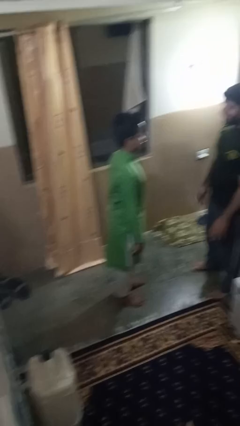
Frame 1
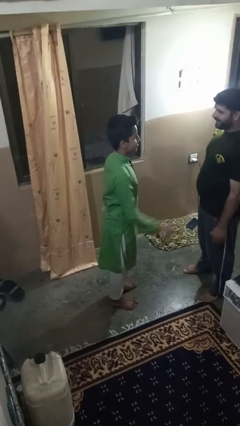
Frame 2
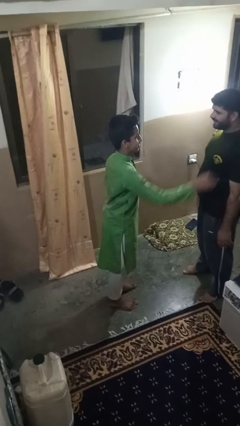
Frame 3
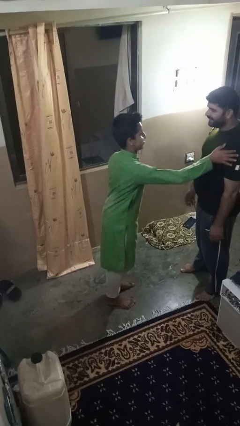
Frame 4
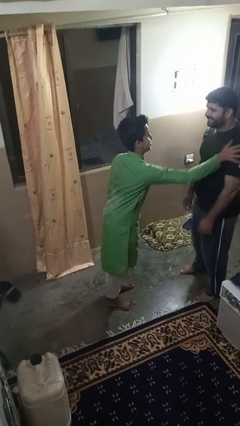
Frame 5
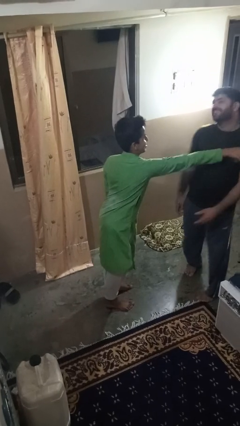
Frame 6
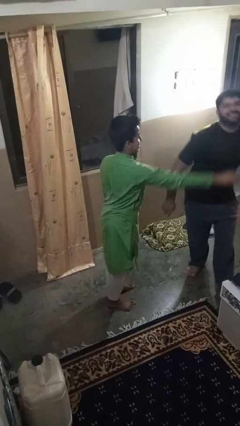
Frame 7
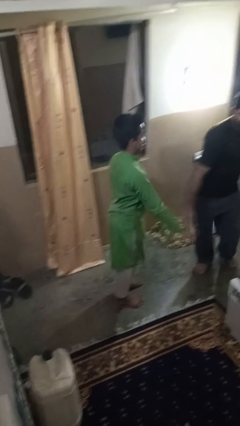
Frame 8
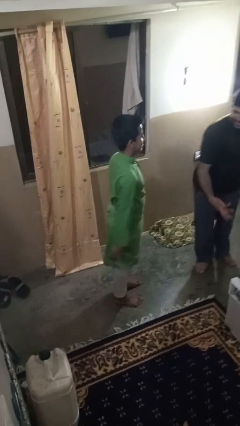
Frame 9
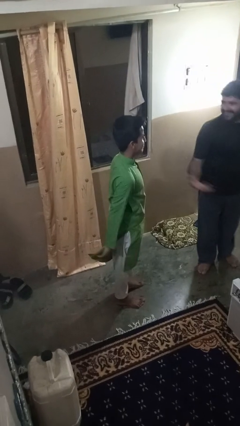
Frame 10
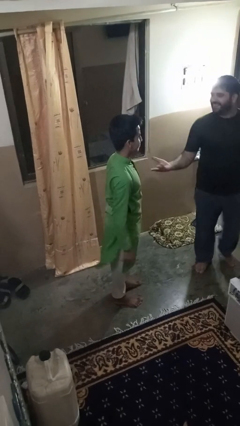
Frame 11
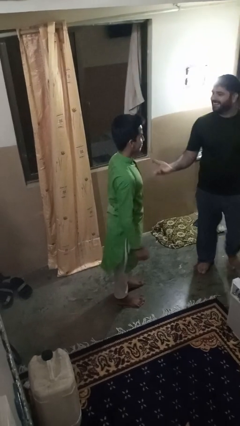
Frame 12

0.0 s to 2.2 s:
person shoves person

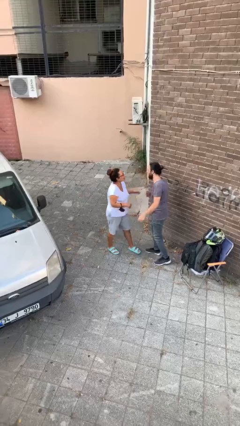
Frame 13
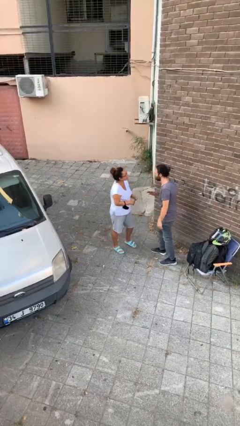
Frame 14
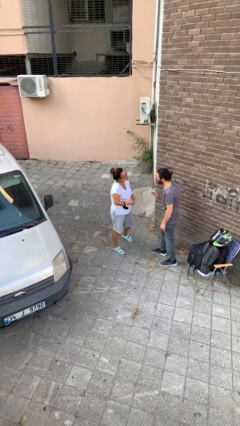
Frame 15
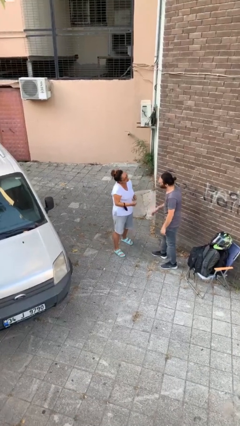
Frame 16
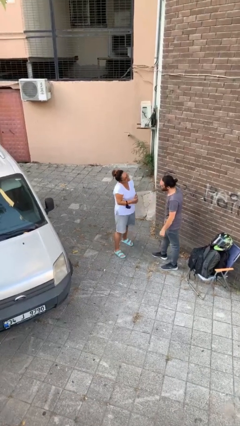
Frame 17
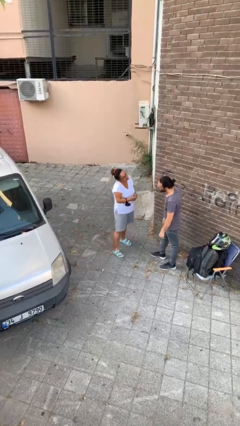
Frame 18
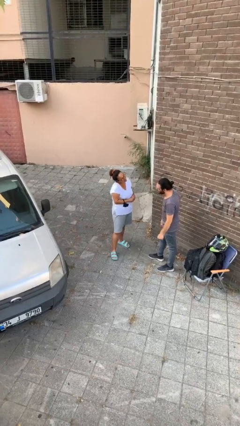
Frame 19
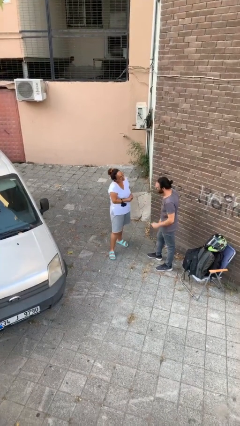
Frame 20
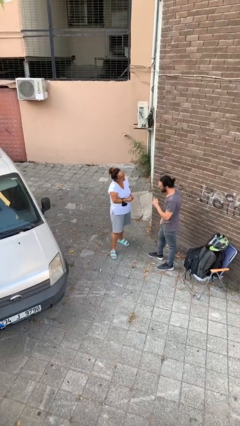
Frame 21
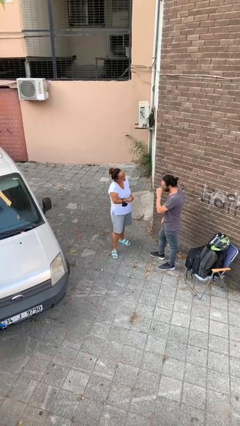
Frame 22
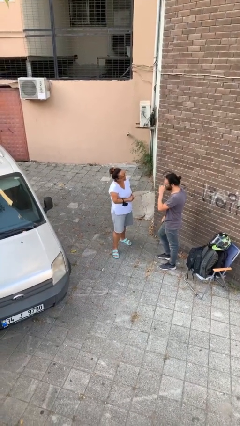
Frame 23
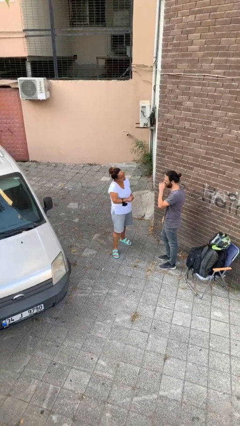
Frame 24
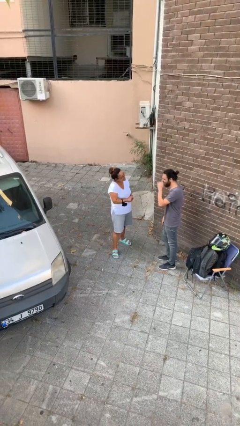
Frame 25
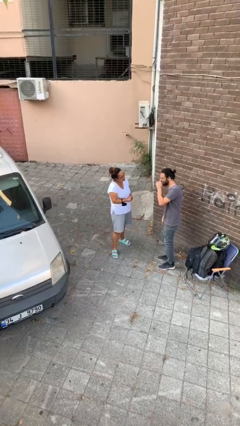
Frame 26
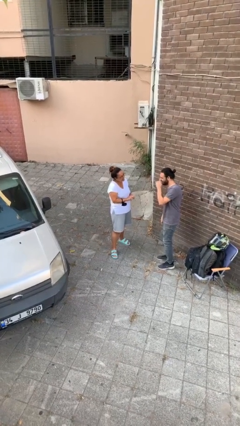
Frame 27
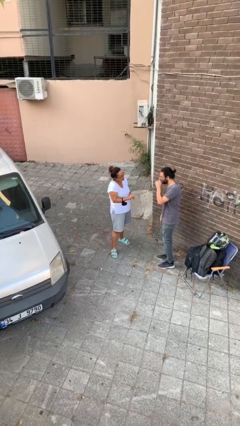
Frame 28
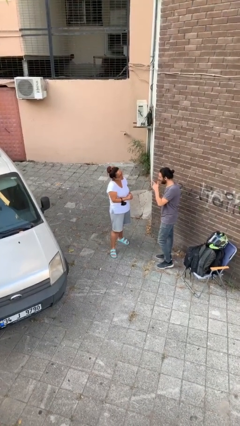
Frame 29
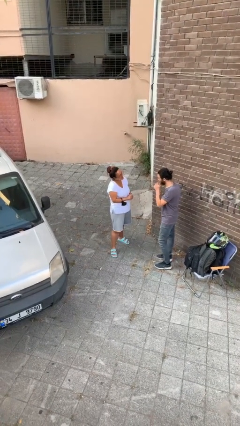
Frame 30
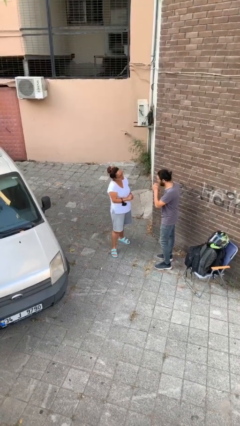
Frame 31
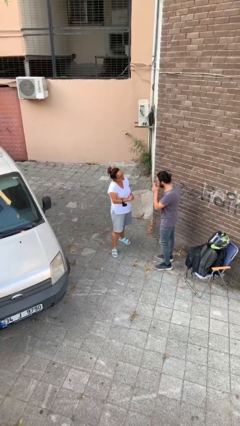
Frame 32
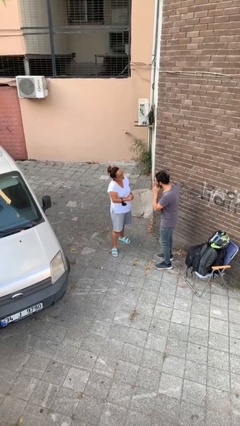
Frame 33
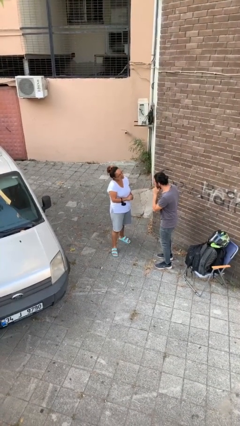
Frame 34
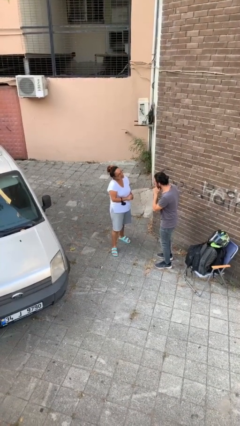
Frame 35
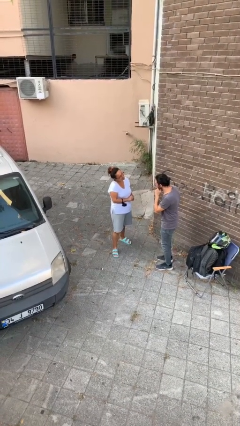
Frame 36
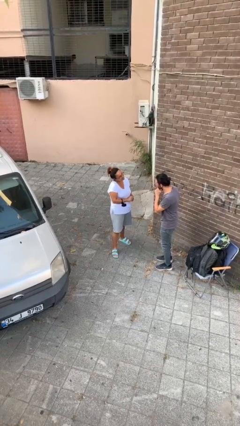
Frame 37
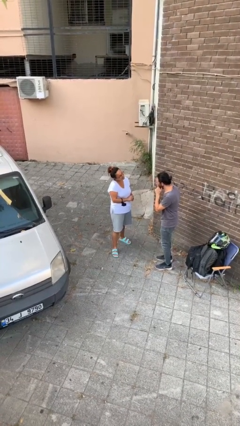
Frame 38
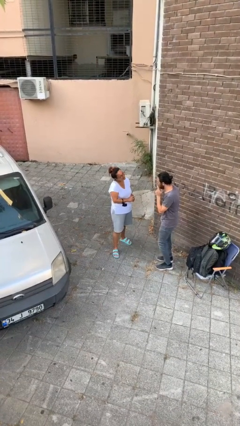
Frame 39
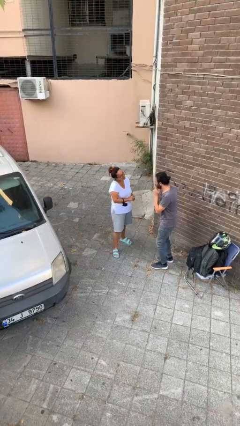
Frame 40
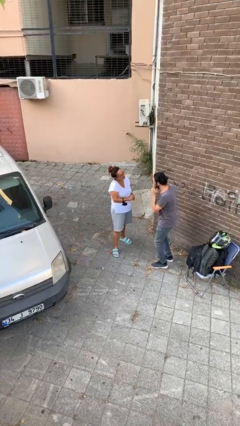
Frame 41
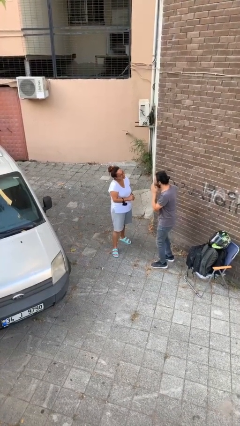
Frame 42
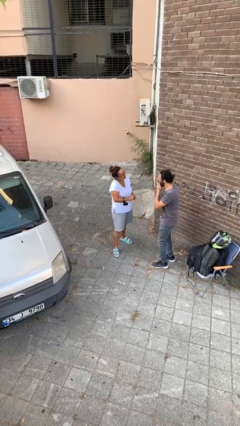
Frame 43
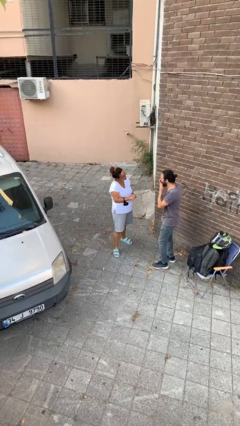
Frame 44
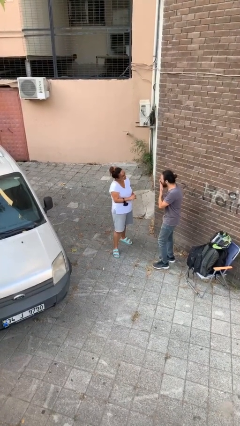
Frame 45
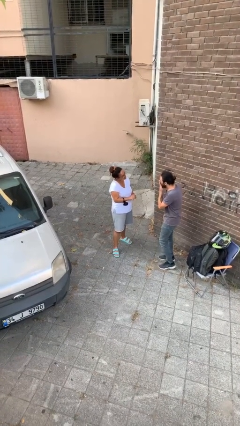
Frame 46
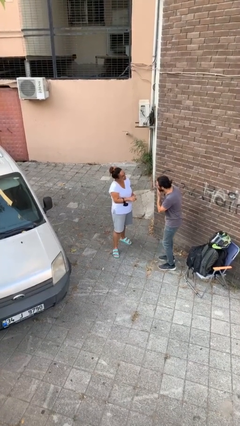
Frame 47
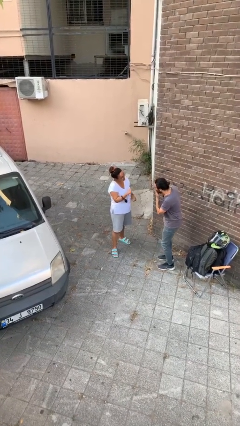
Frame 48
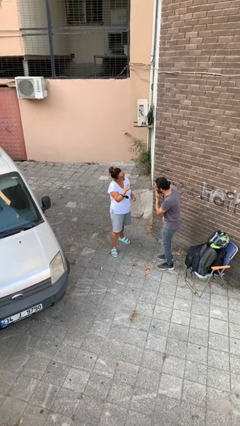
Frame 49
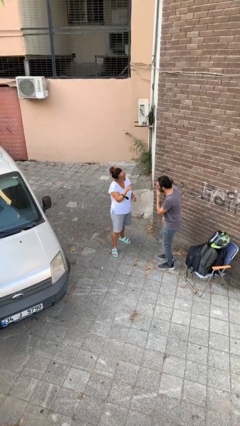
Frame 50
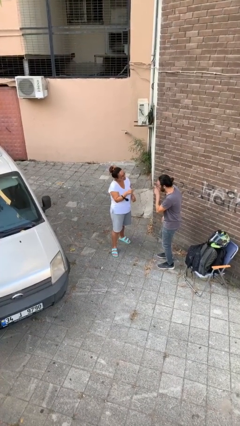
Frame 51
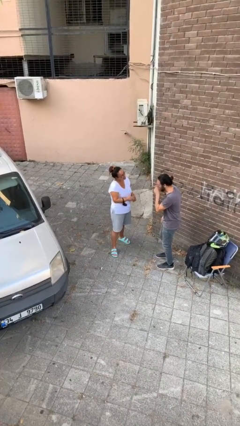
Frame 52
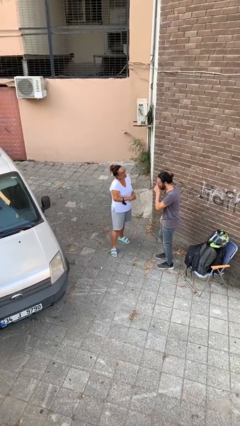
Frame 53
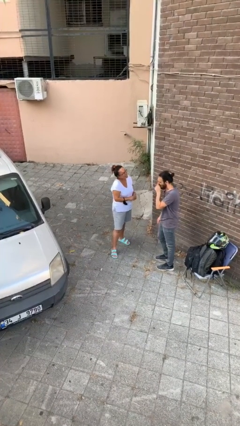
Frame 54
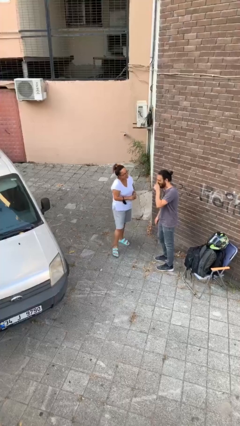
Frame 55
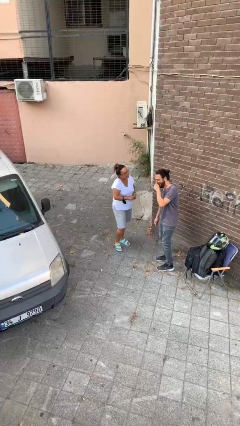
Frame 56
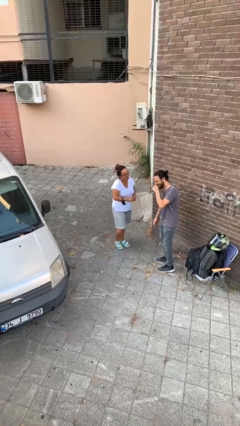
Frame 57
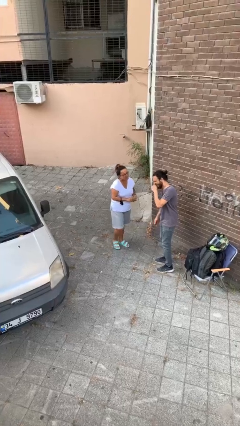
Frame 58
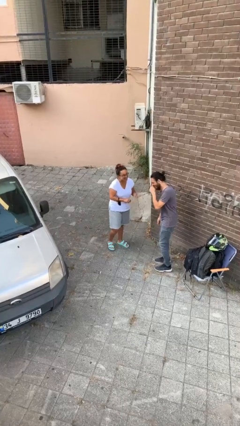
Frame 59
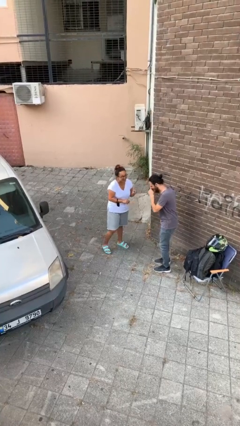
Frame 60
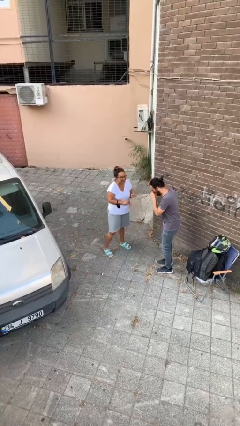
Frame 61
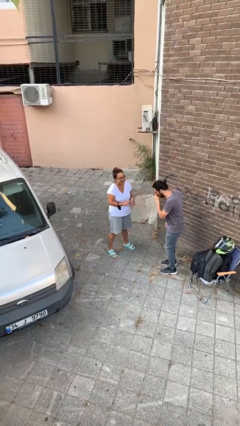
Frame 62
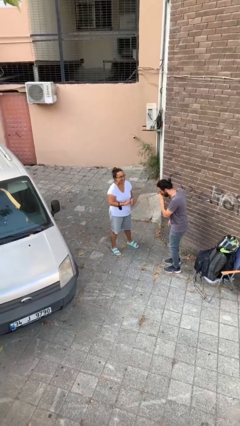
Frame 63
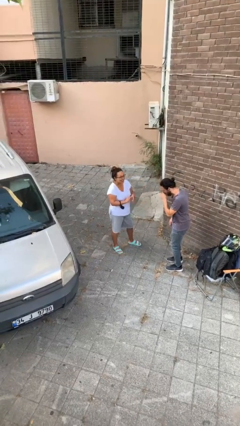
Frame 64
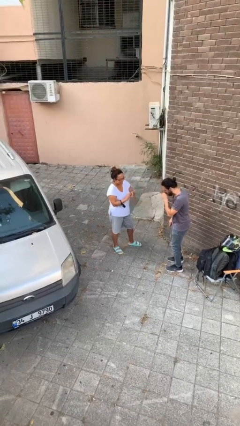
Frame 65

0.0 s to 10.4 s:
person talks to person

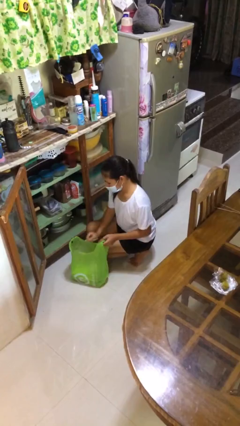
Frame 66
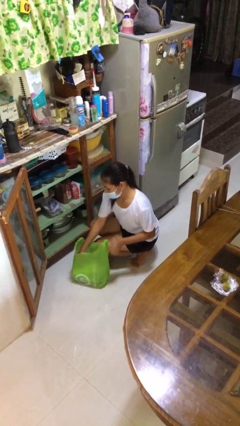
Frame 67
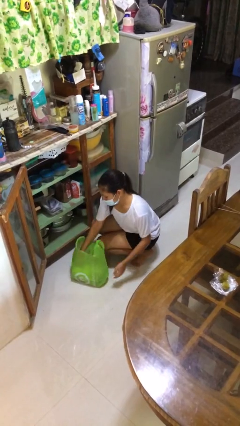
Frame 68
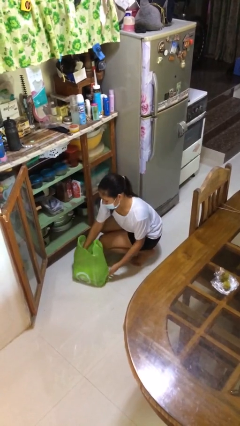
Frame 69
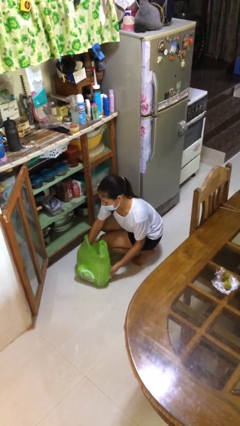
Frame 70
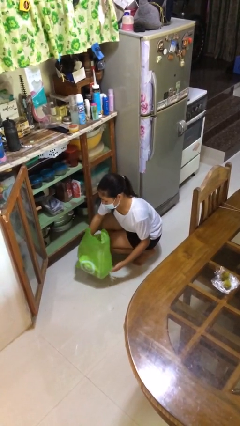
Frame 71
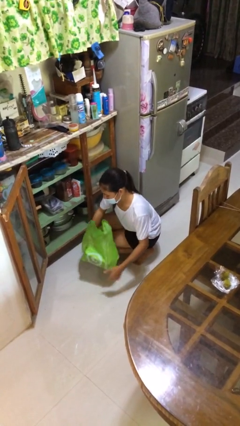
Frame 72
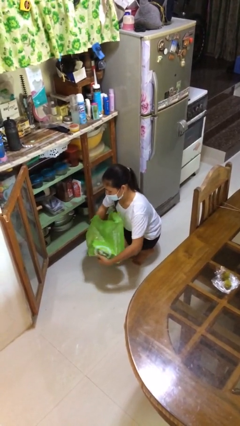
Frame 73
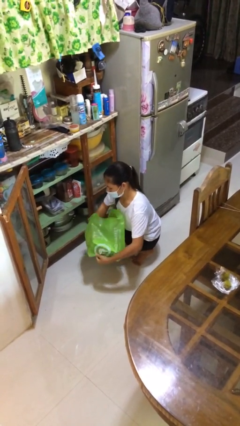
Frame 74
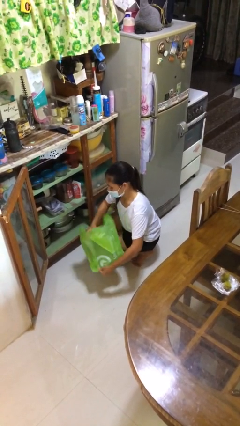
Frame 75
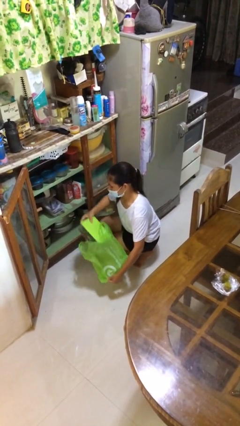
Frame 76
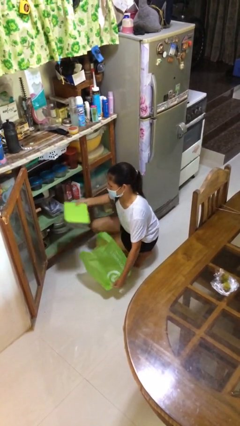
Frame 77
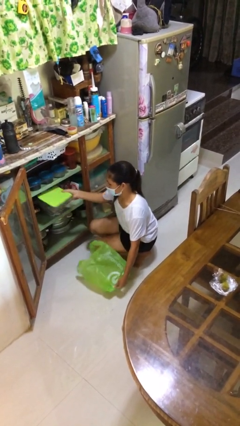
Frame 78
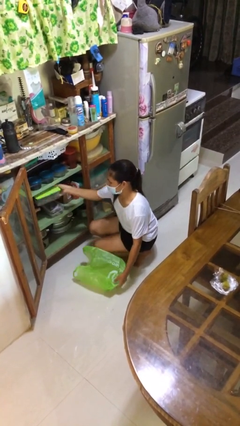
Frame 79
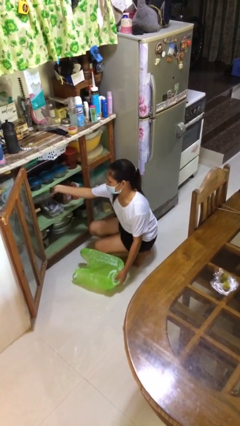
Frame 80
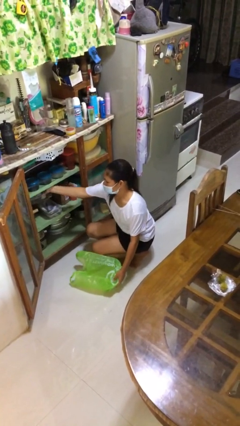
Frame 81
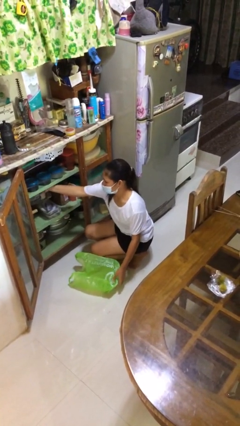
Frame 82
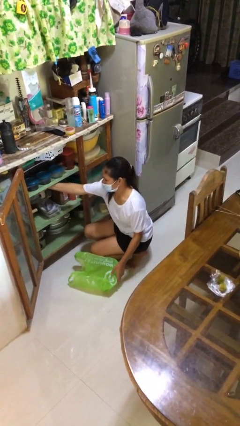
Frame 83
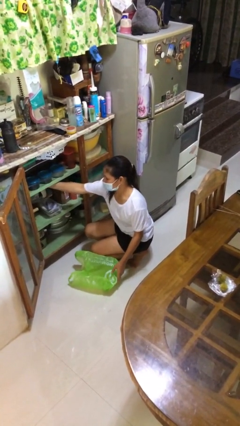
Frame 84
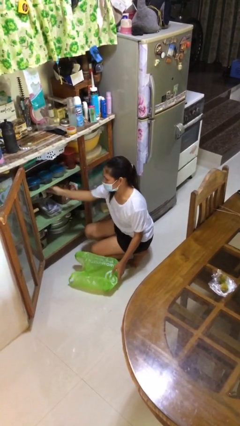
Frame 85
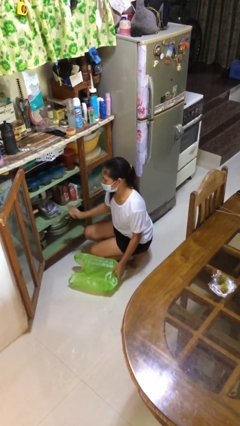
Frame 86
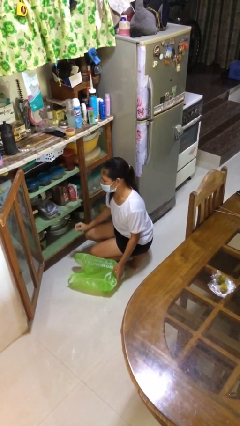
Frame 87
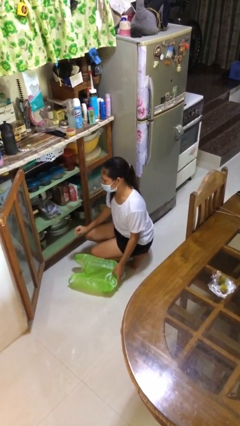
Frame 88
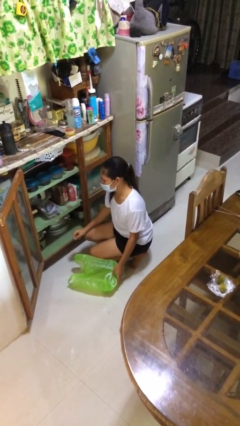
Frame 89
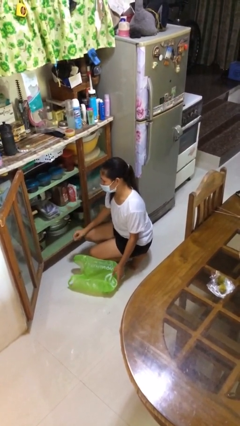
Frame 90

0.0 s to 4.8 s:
person loads groceries into cabinet

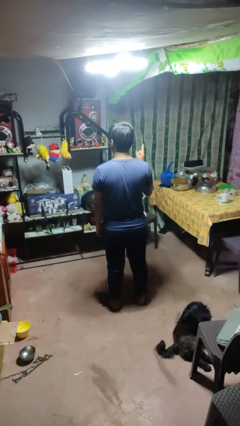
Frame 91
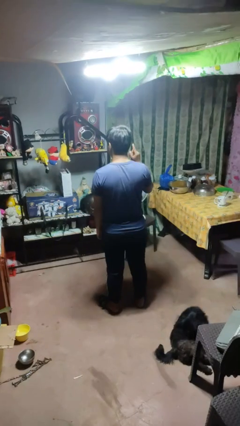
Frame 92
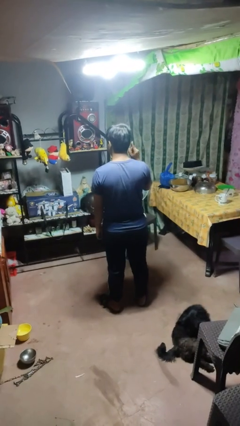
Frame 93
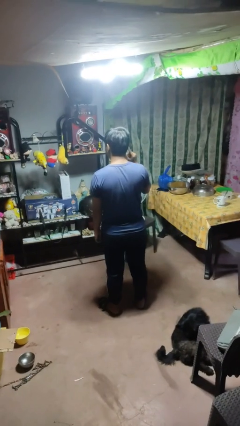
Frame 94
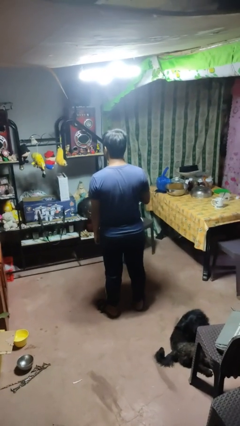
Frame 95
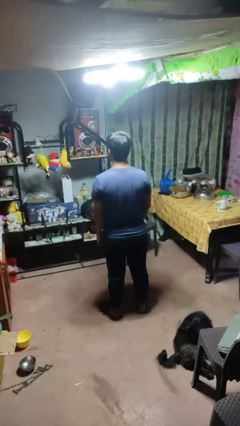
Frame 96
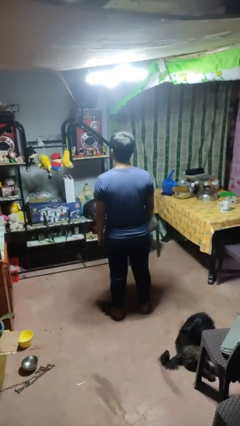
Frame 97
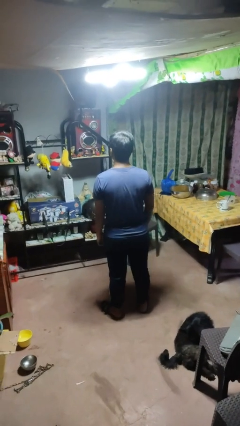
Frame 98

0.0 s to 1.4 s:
person gestures listen closely
